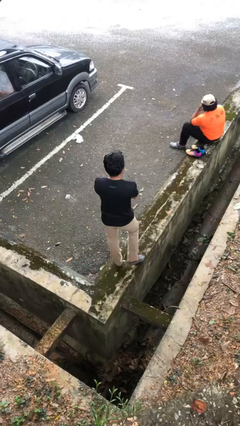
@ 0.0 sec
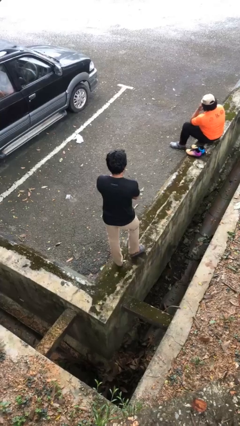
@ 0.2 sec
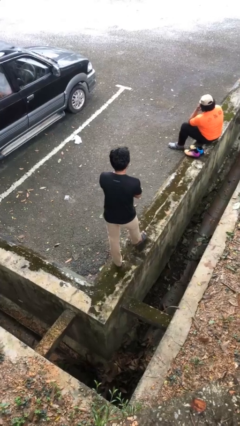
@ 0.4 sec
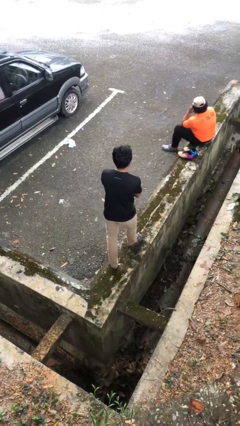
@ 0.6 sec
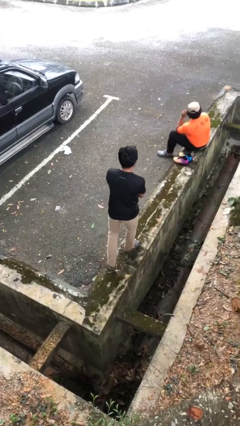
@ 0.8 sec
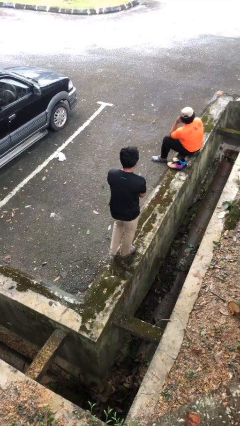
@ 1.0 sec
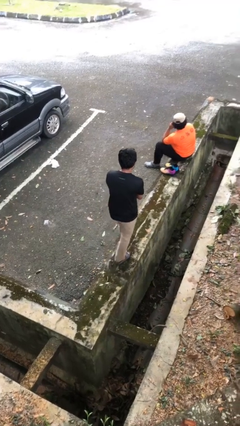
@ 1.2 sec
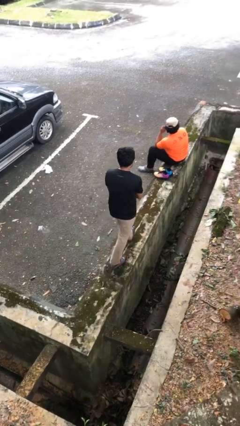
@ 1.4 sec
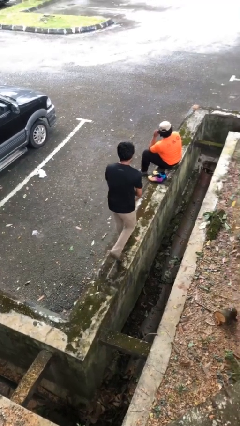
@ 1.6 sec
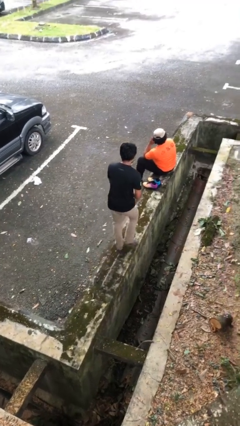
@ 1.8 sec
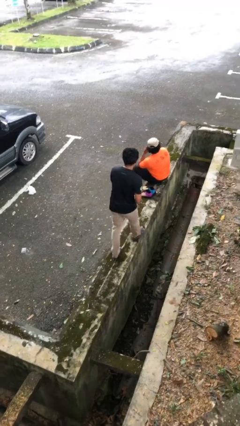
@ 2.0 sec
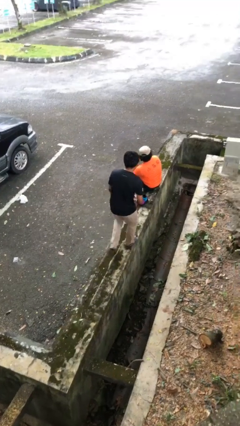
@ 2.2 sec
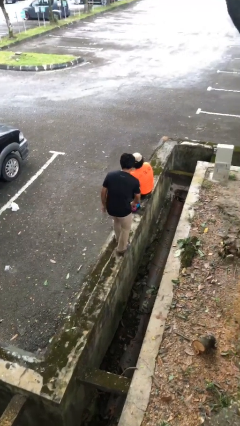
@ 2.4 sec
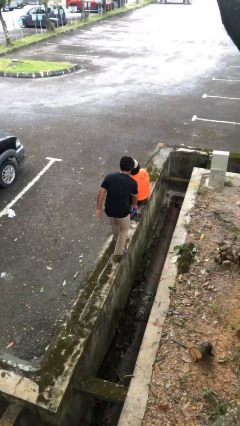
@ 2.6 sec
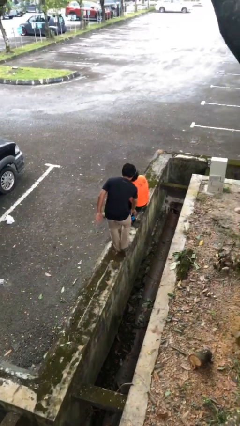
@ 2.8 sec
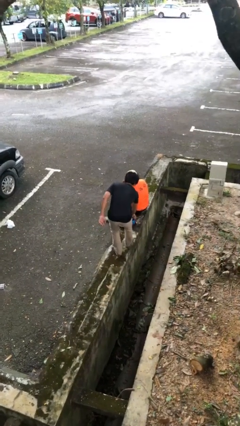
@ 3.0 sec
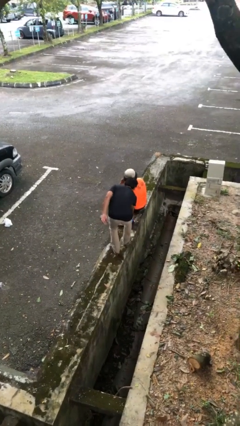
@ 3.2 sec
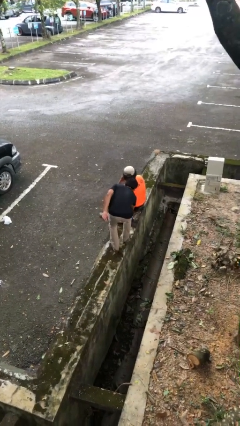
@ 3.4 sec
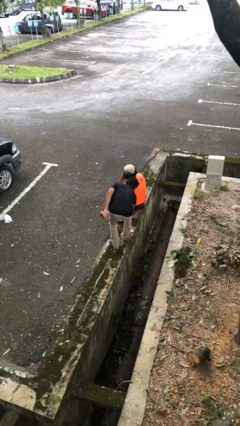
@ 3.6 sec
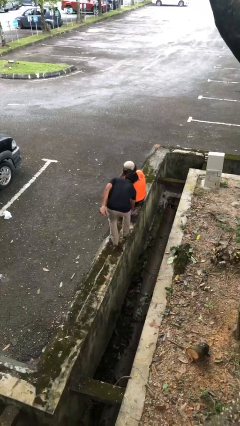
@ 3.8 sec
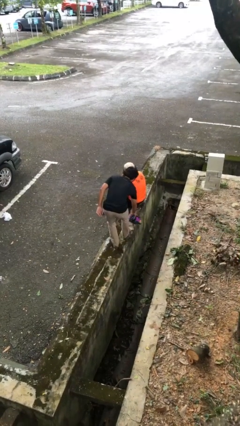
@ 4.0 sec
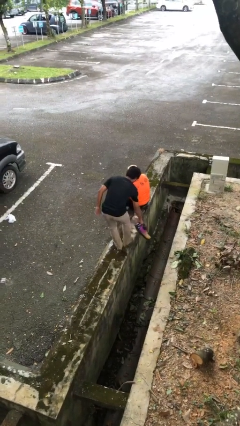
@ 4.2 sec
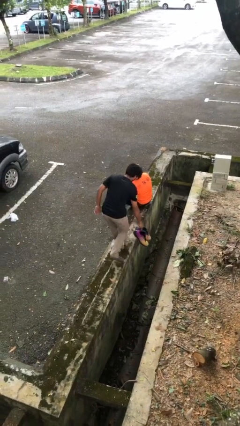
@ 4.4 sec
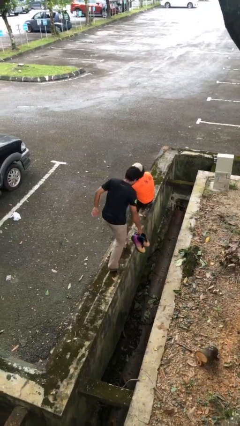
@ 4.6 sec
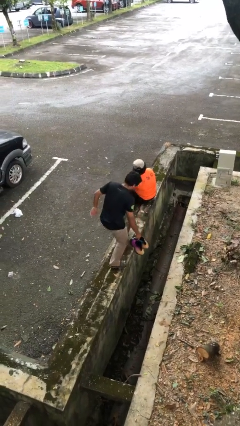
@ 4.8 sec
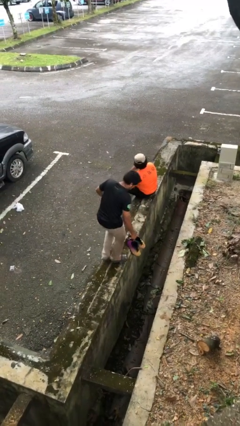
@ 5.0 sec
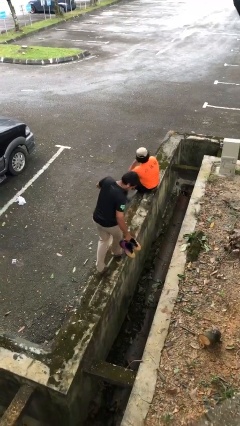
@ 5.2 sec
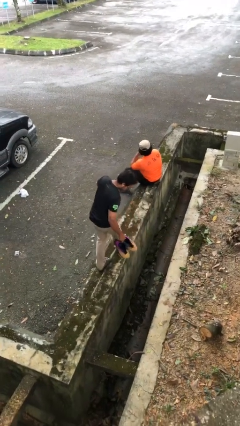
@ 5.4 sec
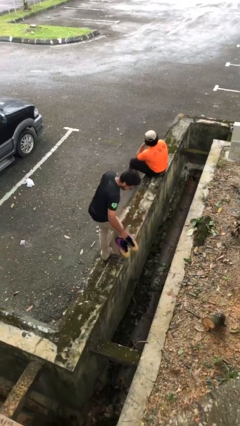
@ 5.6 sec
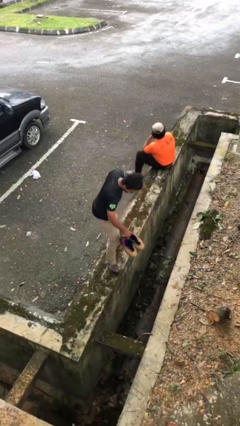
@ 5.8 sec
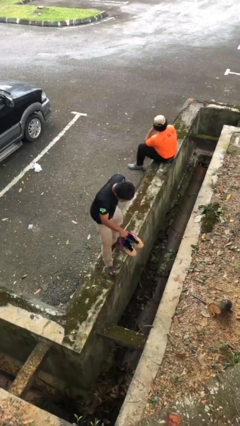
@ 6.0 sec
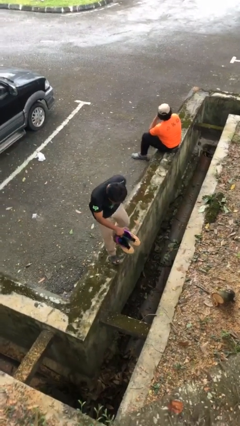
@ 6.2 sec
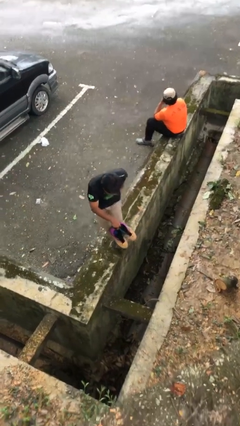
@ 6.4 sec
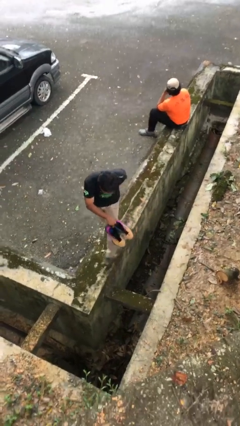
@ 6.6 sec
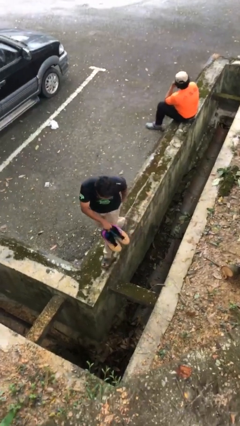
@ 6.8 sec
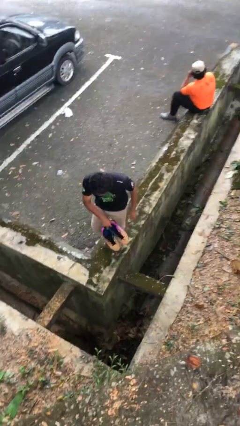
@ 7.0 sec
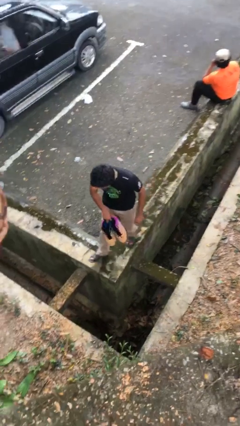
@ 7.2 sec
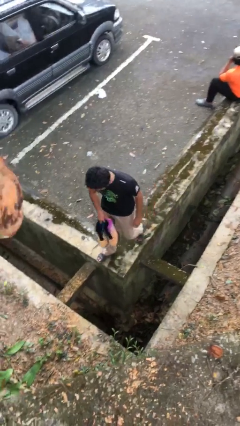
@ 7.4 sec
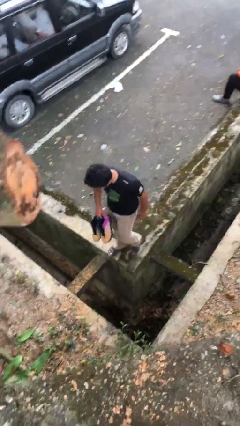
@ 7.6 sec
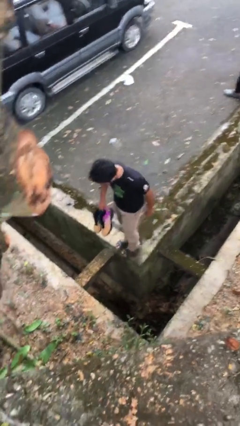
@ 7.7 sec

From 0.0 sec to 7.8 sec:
person steals object from person

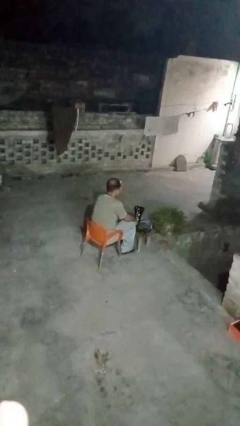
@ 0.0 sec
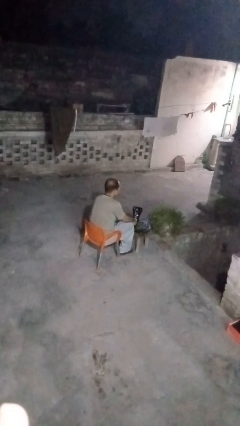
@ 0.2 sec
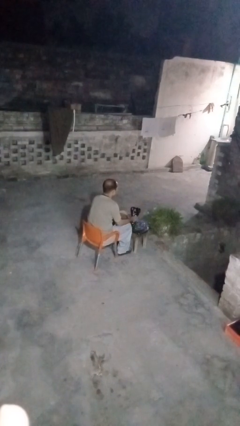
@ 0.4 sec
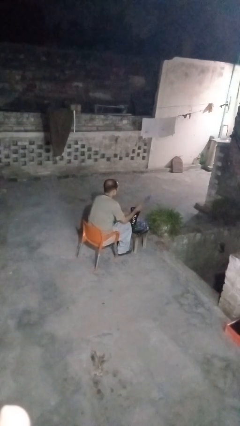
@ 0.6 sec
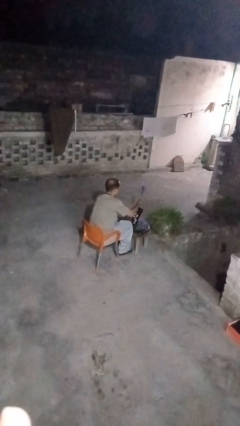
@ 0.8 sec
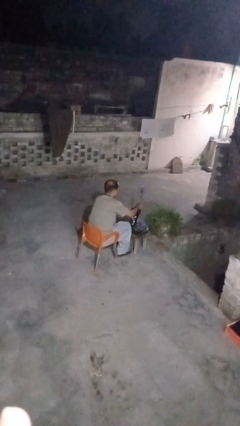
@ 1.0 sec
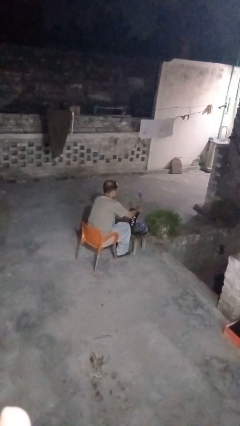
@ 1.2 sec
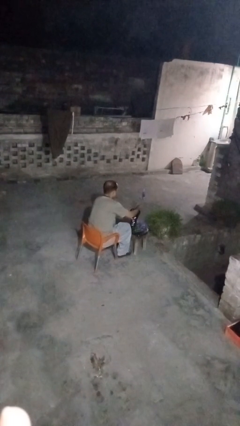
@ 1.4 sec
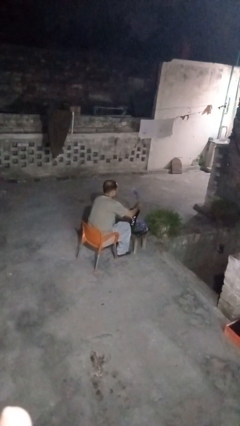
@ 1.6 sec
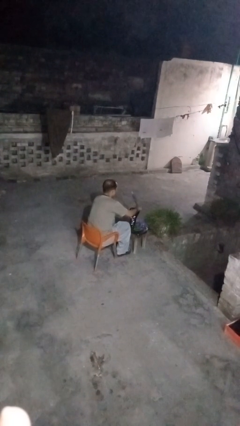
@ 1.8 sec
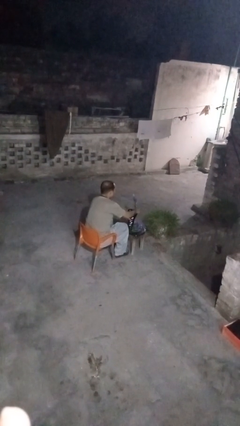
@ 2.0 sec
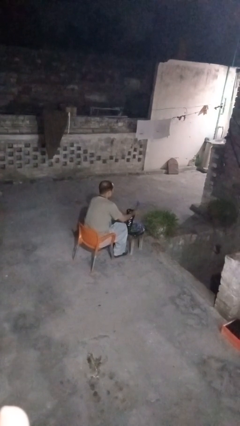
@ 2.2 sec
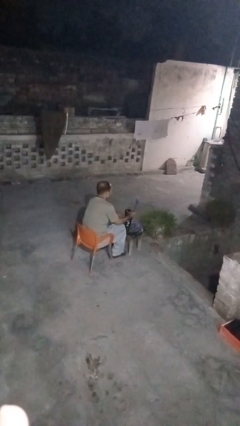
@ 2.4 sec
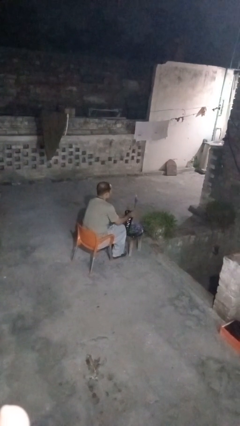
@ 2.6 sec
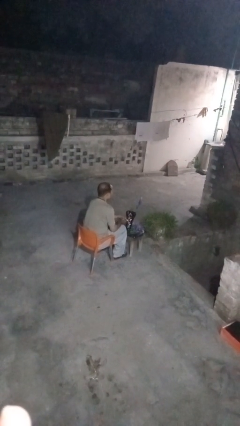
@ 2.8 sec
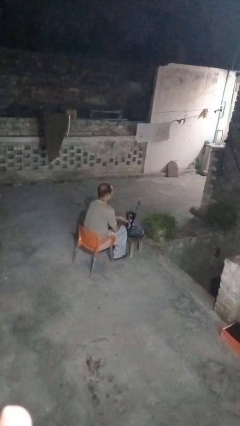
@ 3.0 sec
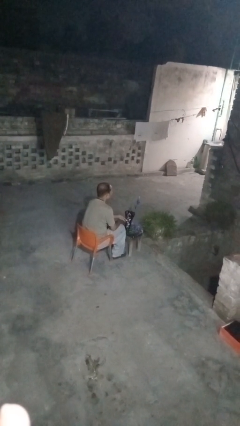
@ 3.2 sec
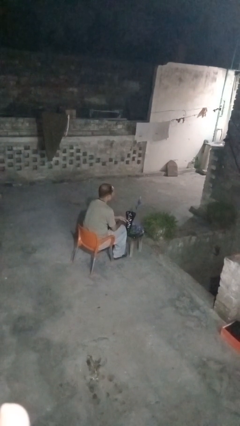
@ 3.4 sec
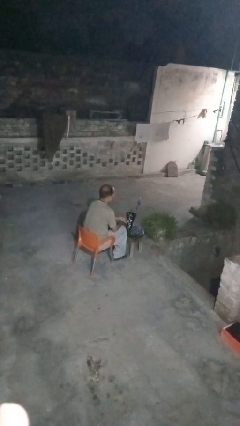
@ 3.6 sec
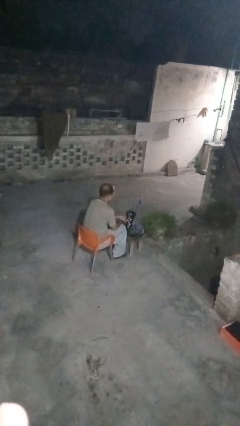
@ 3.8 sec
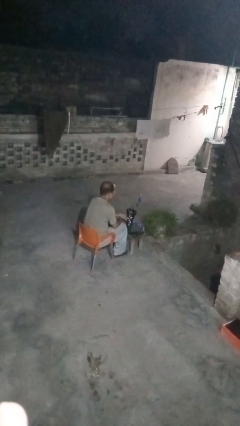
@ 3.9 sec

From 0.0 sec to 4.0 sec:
person arranges flowers in vase

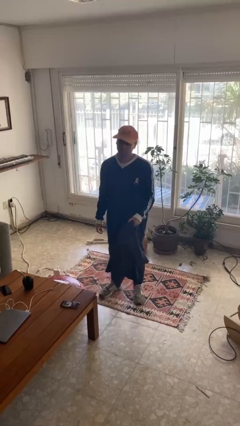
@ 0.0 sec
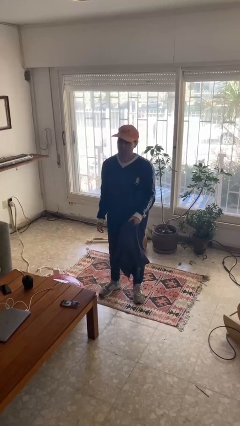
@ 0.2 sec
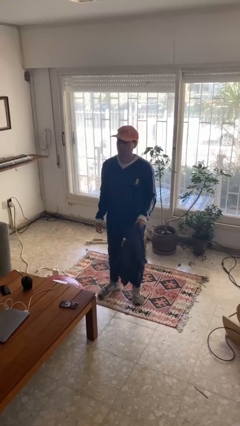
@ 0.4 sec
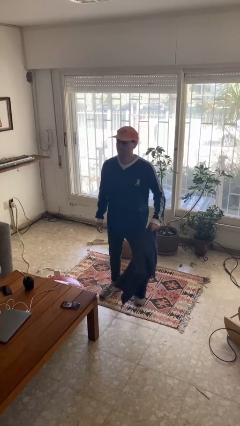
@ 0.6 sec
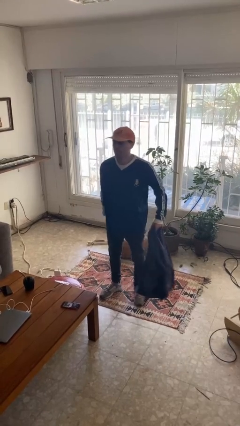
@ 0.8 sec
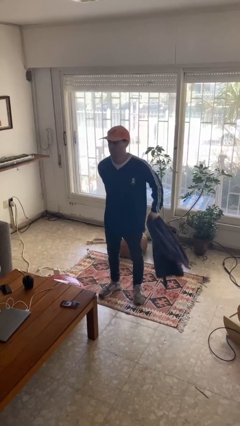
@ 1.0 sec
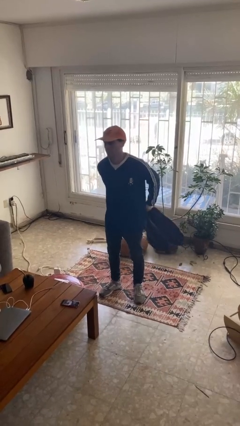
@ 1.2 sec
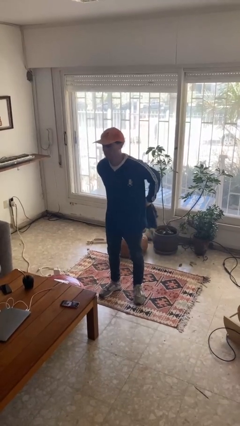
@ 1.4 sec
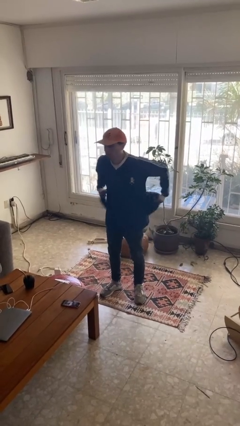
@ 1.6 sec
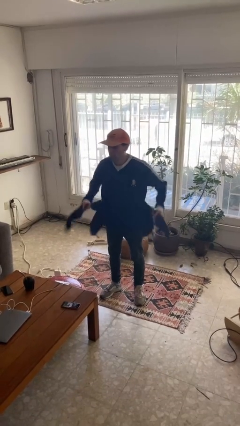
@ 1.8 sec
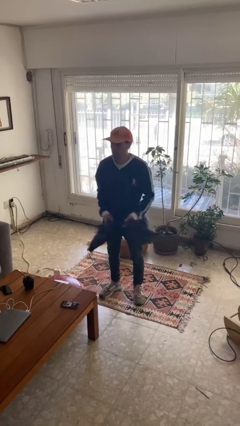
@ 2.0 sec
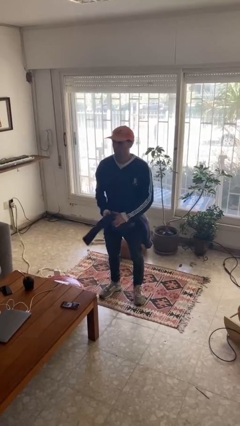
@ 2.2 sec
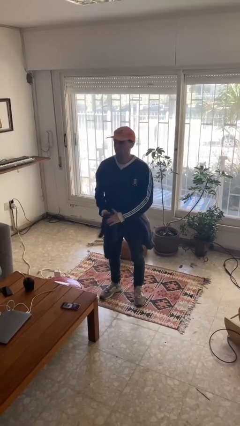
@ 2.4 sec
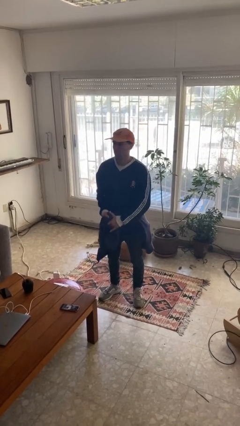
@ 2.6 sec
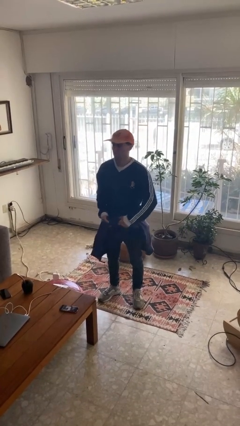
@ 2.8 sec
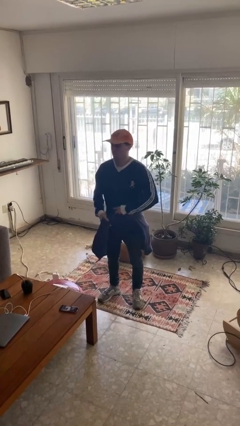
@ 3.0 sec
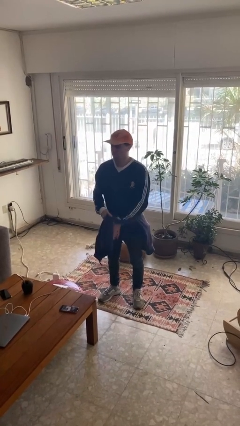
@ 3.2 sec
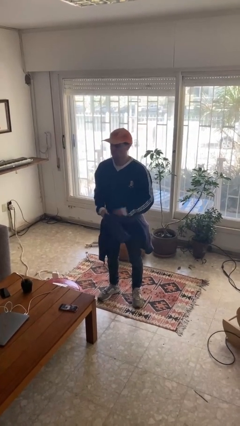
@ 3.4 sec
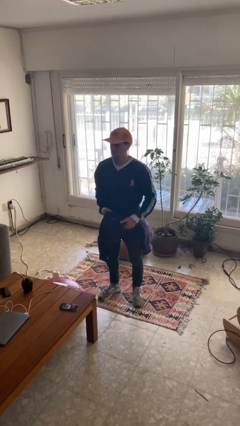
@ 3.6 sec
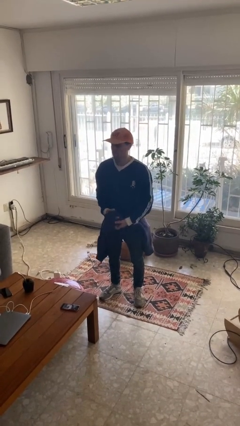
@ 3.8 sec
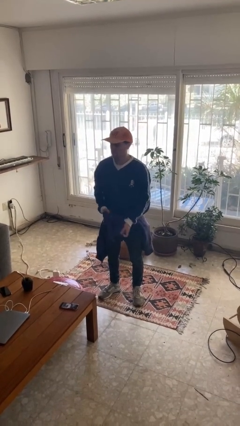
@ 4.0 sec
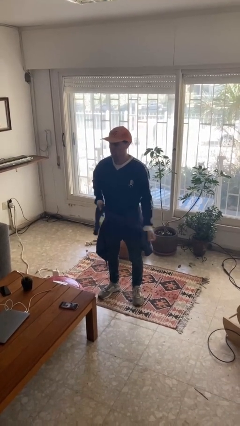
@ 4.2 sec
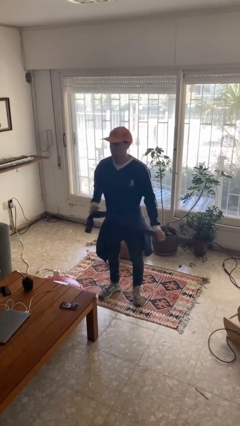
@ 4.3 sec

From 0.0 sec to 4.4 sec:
person ties jacket around waist

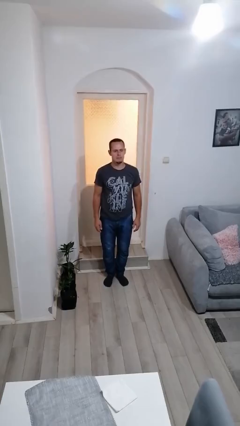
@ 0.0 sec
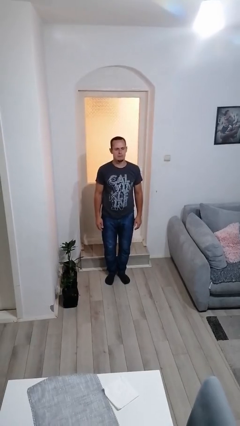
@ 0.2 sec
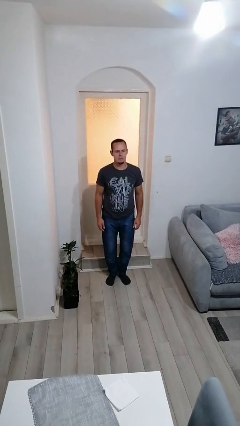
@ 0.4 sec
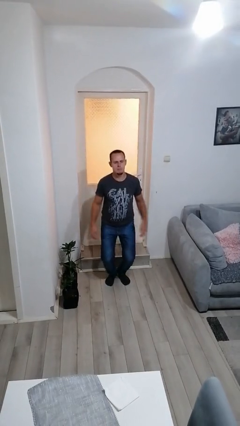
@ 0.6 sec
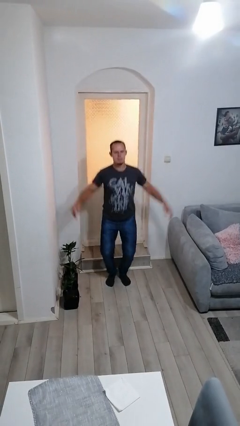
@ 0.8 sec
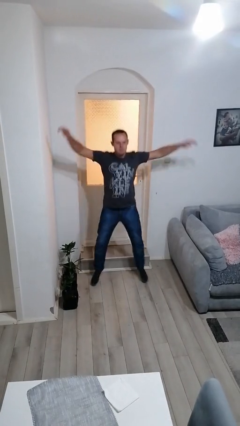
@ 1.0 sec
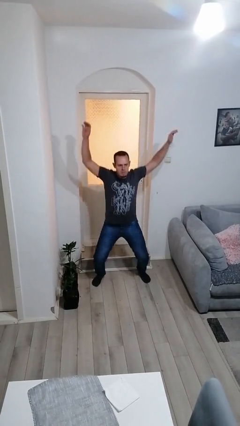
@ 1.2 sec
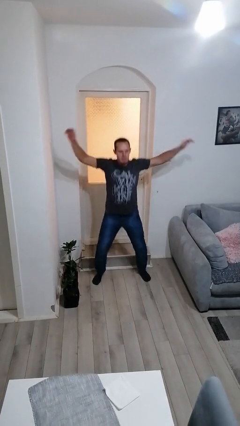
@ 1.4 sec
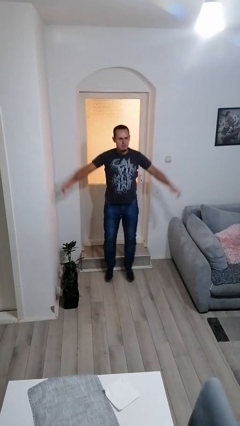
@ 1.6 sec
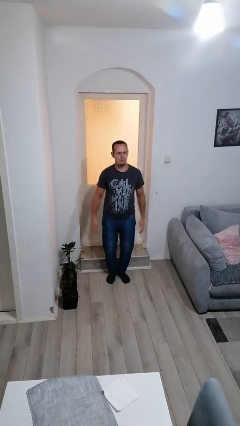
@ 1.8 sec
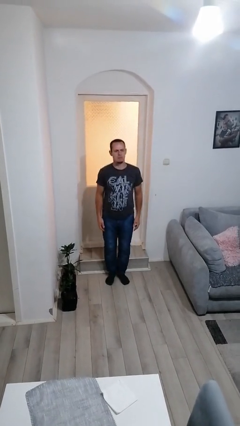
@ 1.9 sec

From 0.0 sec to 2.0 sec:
person exercises with jumping jacks
